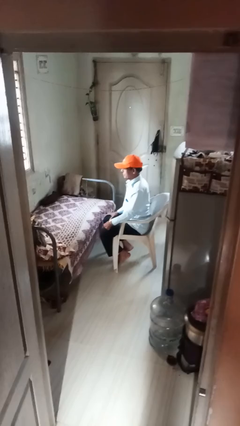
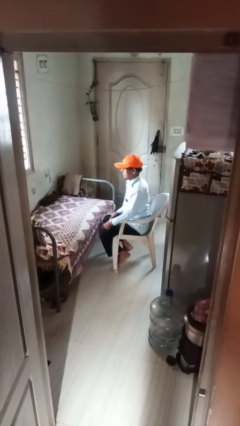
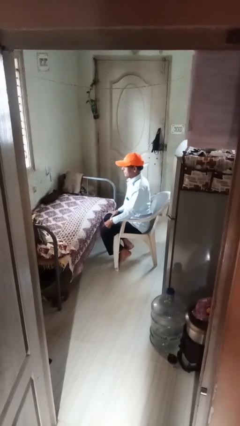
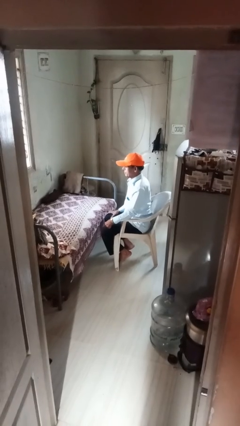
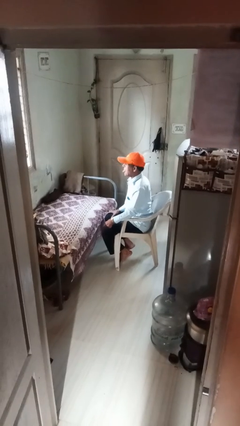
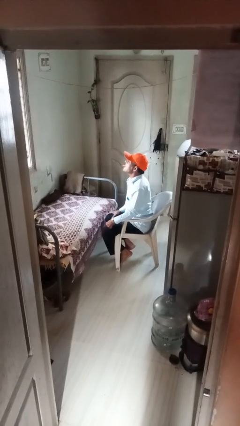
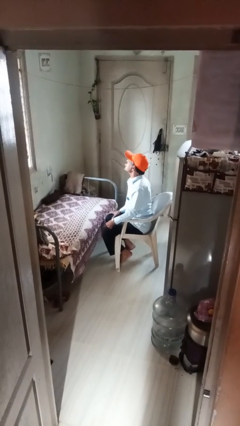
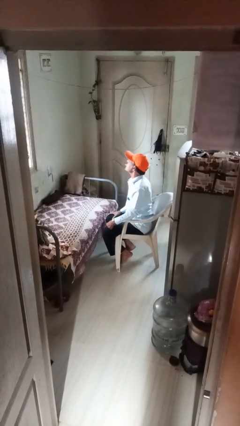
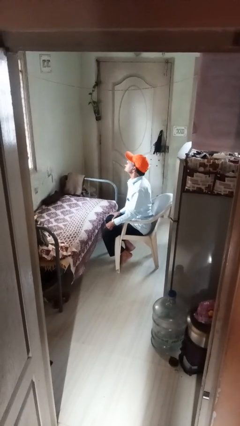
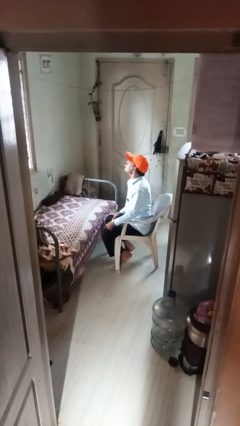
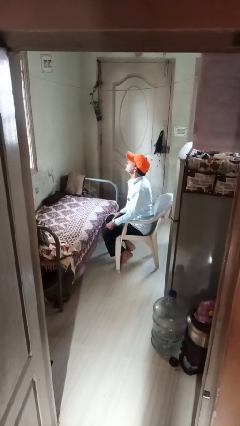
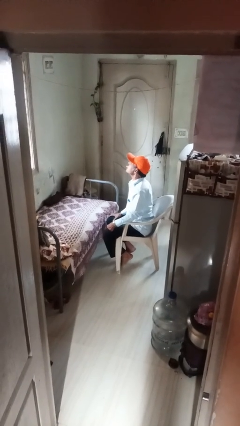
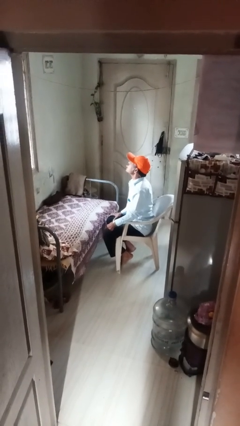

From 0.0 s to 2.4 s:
person sticks out tongue

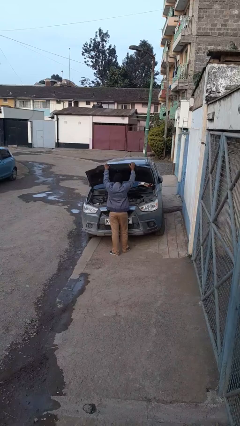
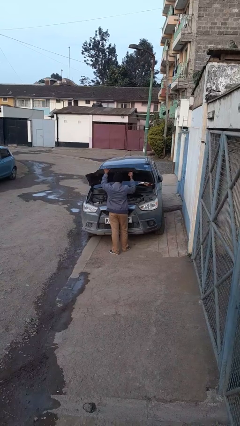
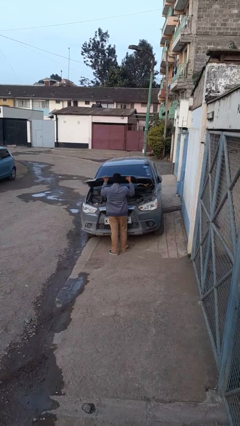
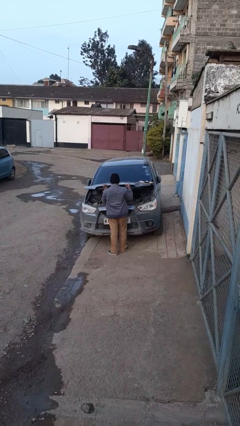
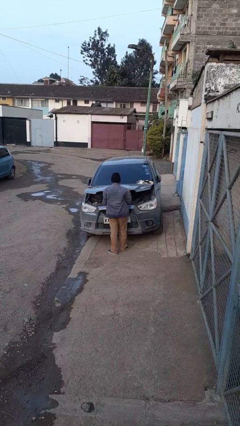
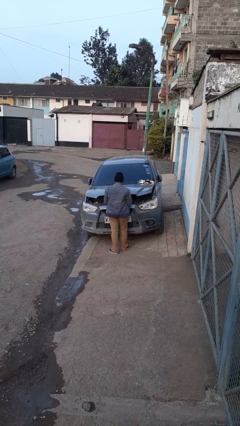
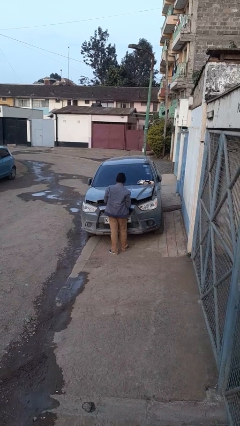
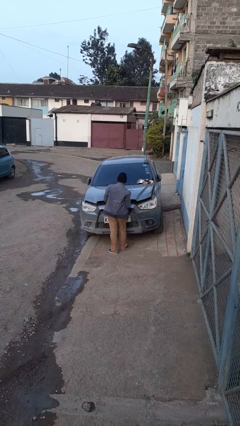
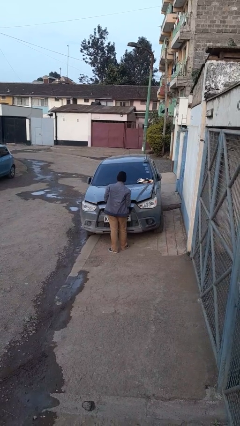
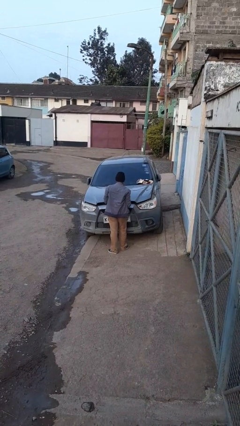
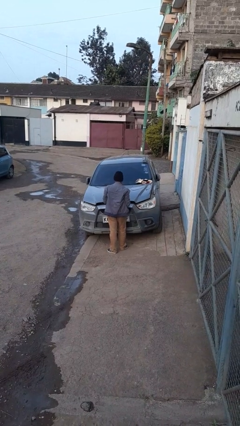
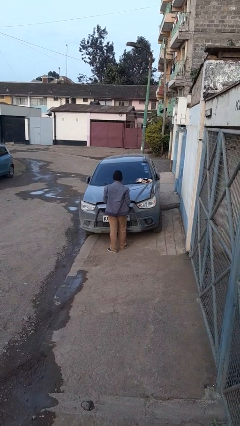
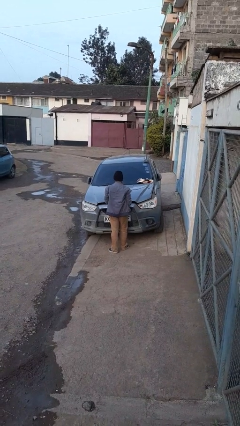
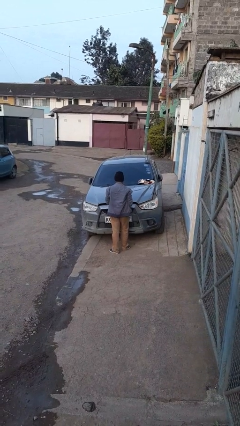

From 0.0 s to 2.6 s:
person closes car hood

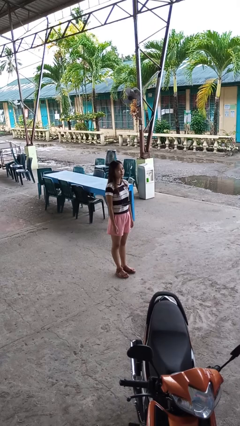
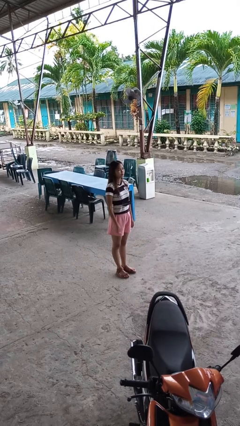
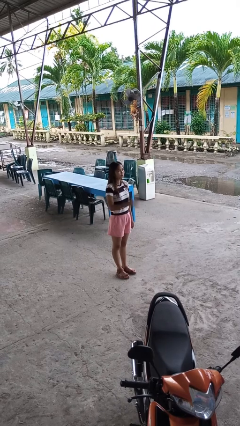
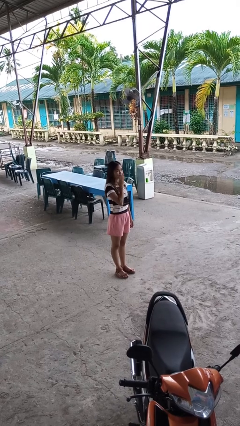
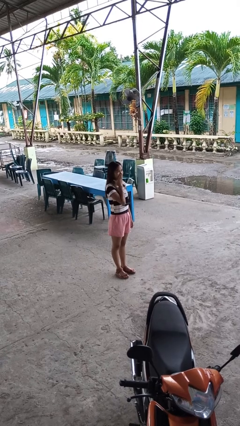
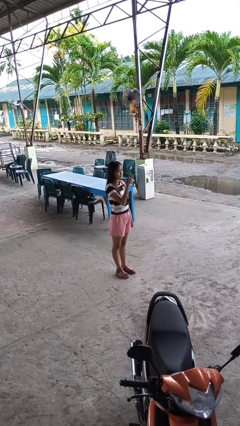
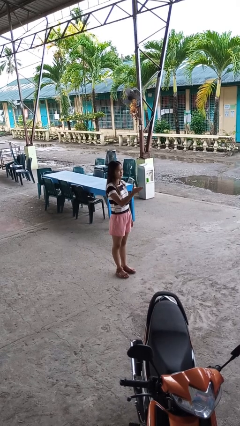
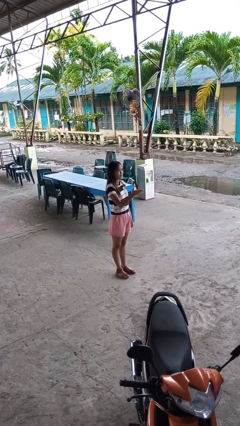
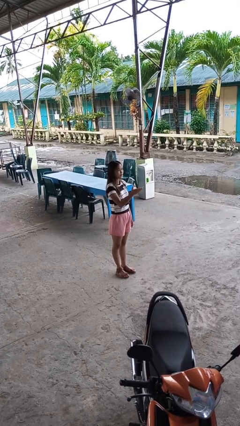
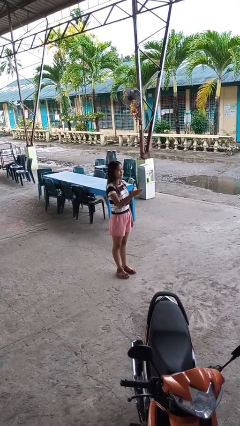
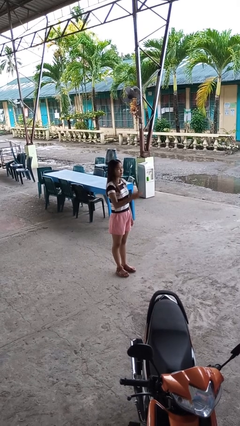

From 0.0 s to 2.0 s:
person gestures blow kiss

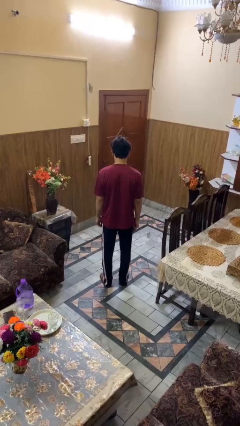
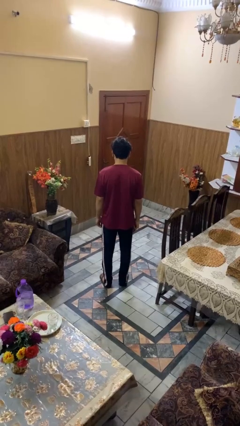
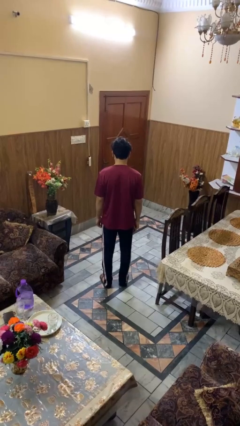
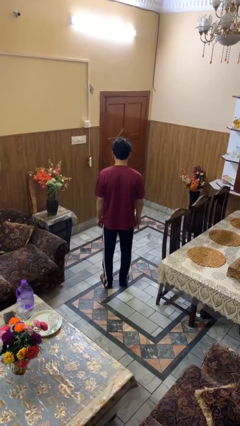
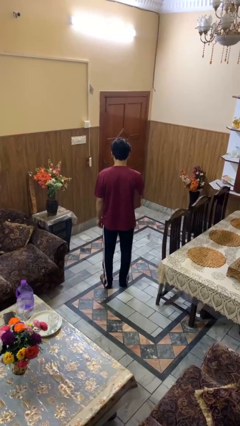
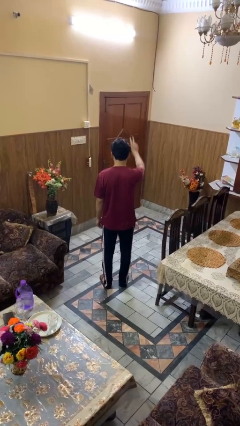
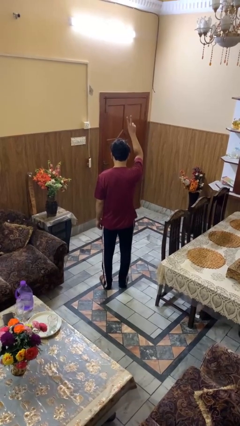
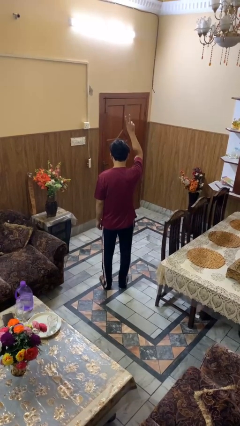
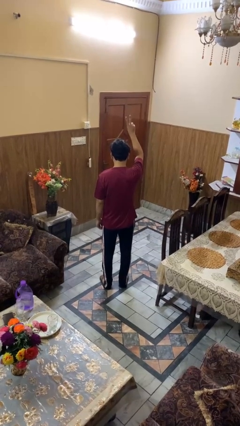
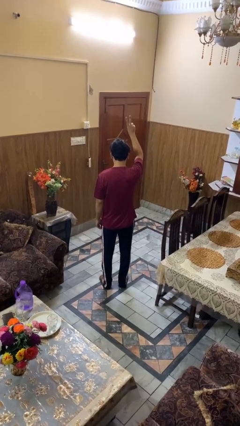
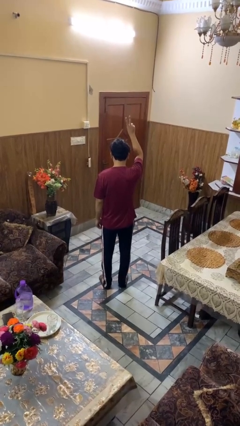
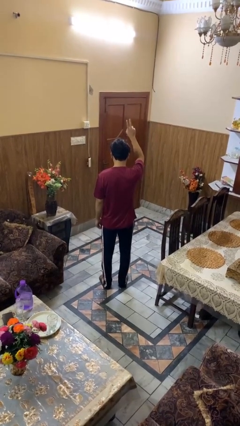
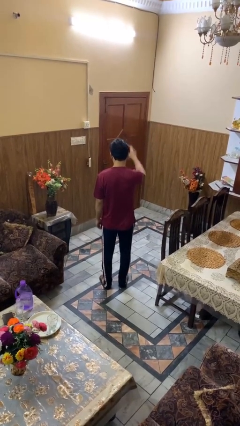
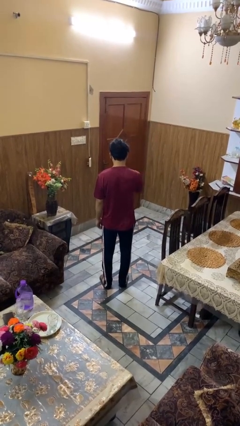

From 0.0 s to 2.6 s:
person gestures peace

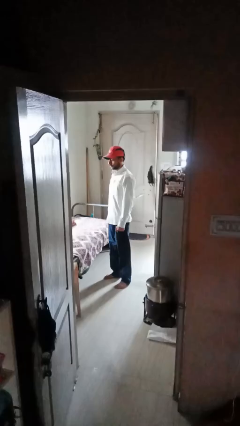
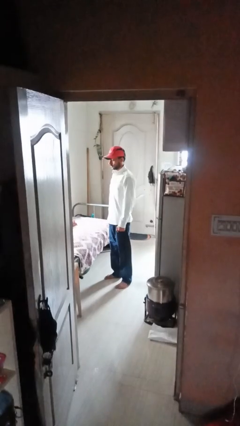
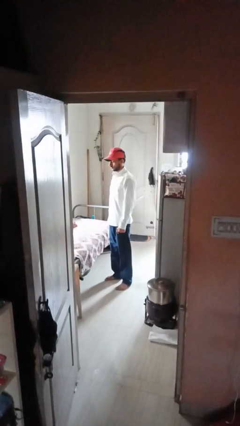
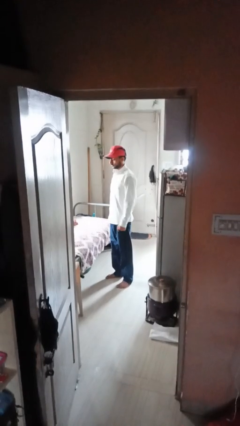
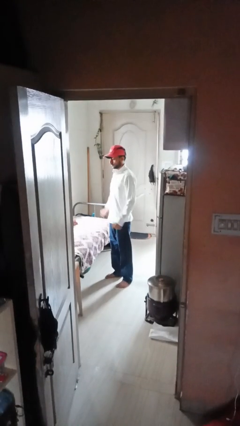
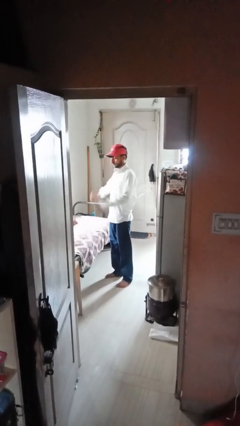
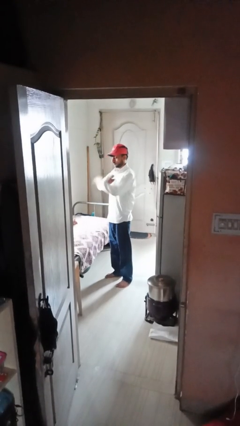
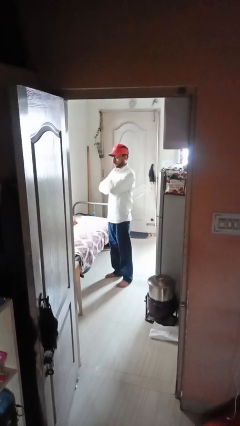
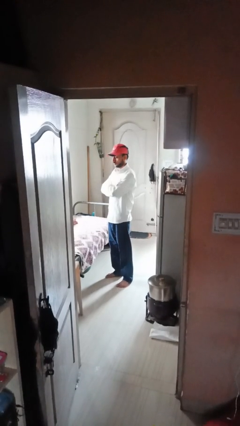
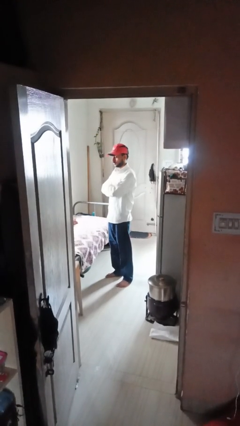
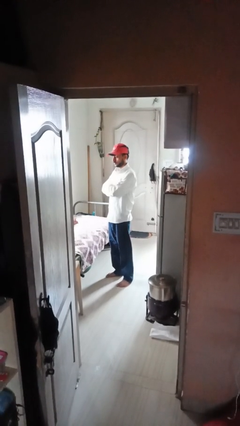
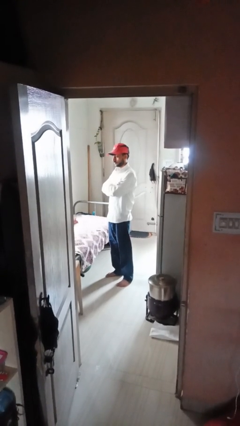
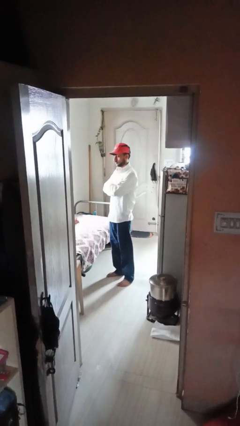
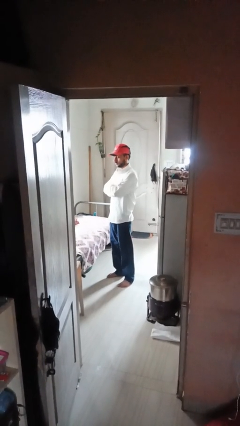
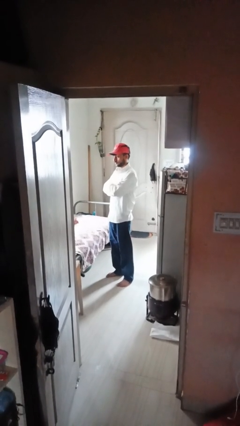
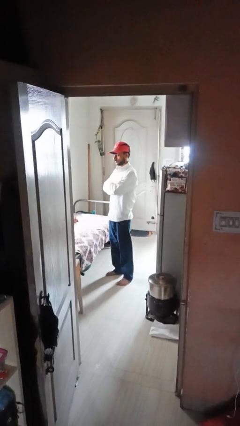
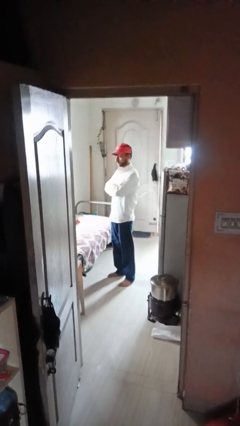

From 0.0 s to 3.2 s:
person crosses arms

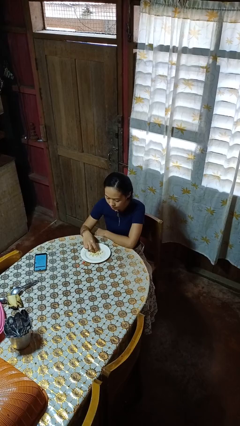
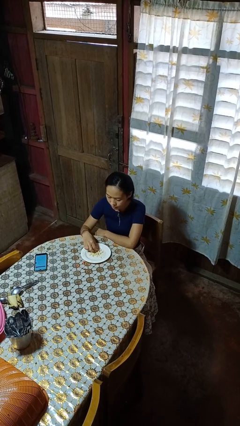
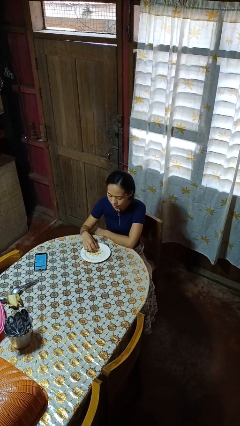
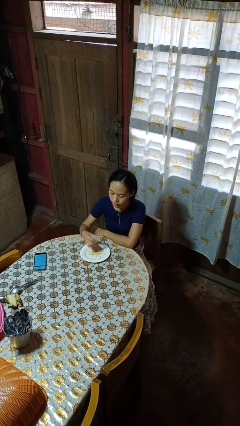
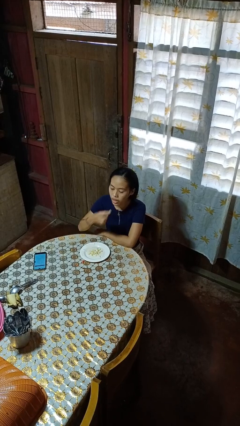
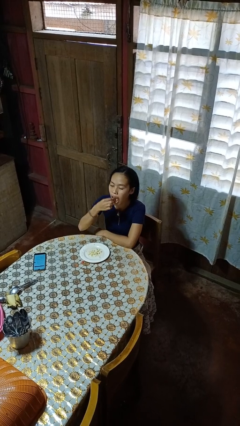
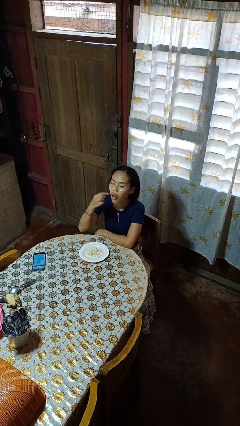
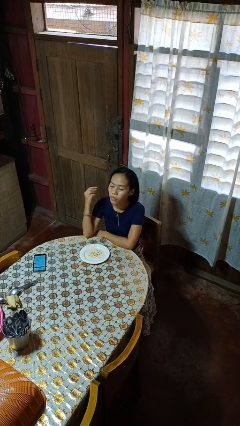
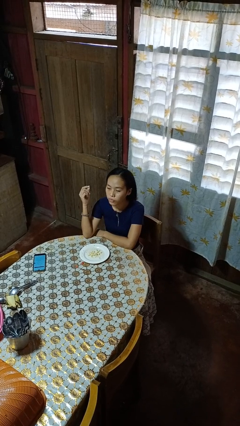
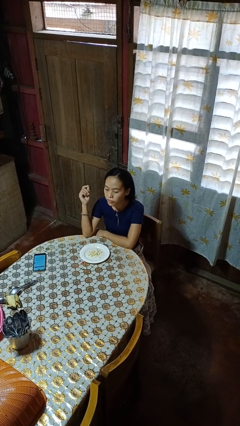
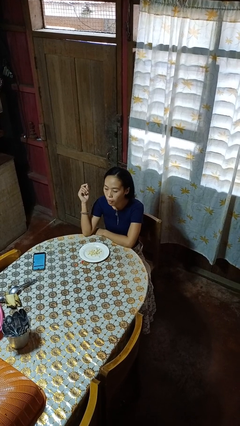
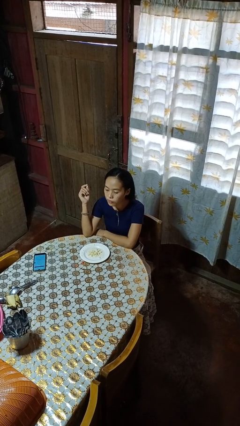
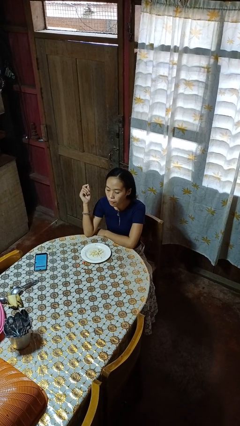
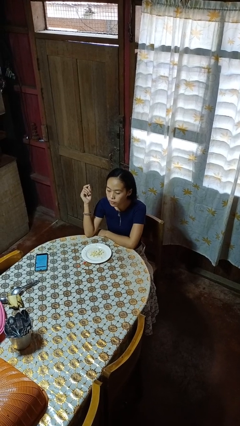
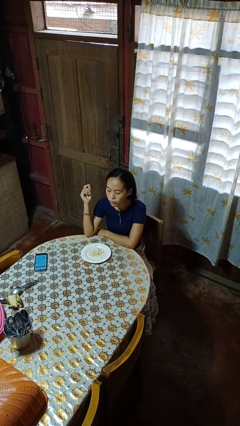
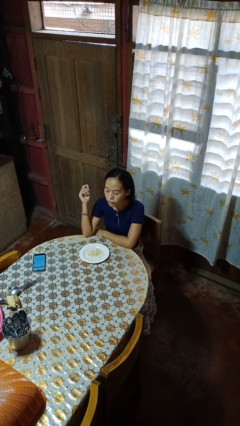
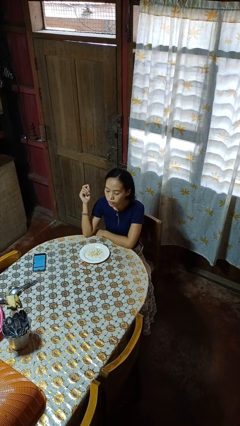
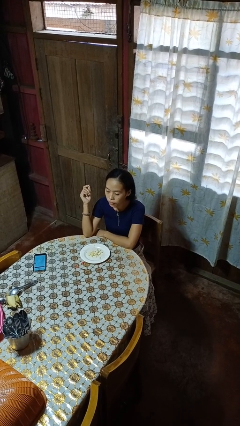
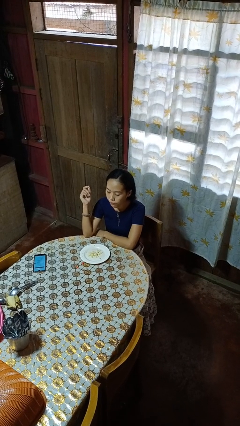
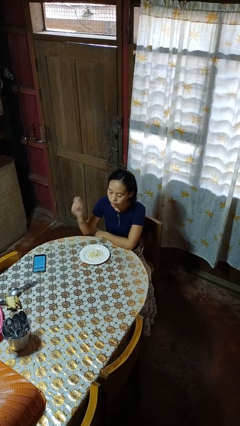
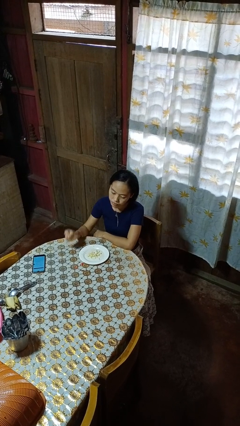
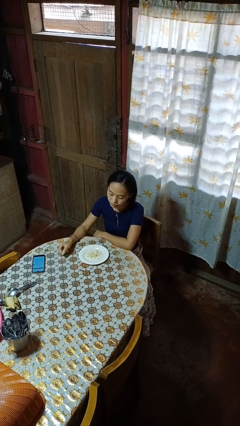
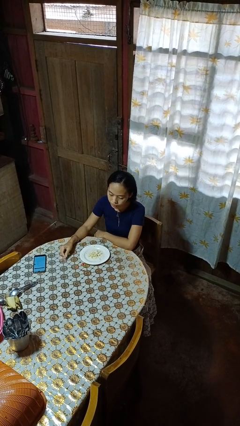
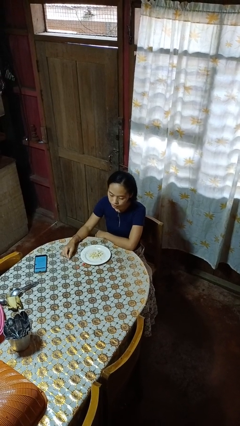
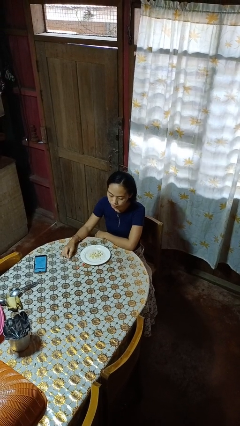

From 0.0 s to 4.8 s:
person eats with hands
